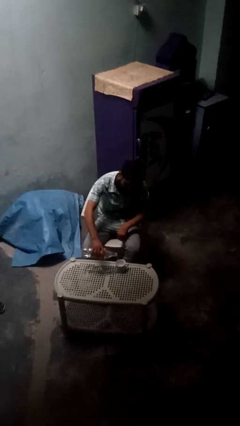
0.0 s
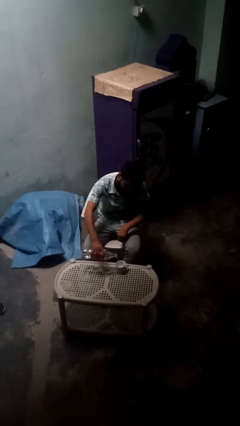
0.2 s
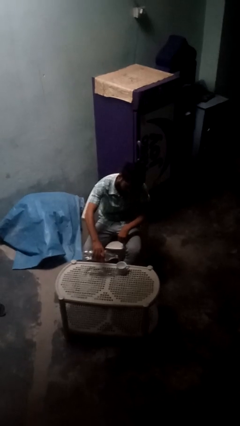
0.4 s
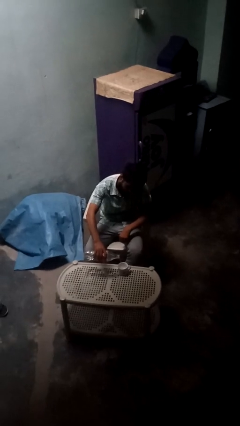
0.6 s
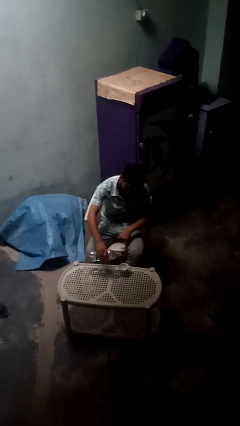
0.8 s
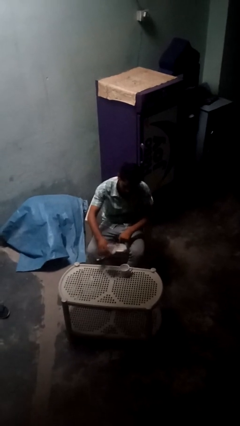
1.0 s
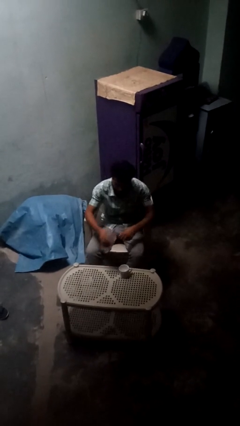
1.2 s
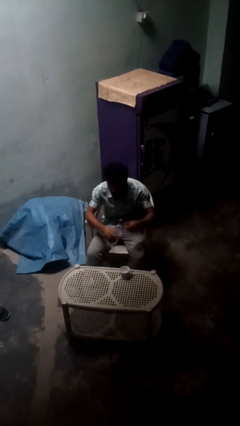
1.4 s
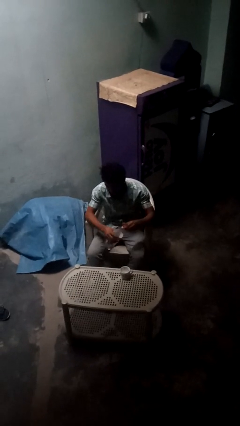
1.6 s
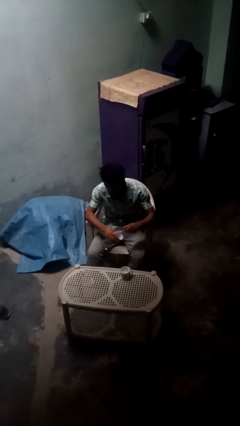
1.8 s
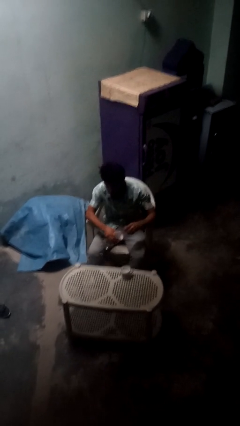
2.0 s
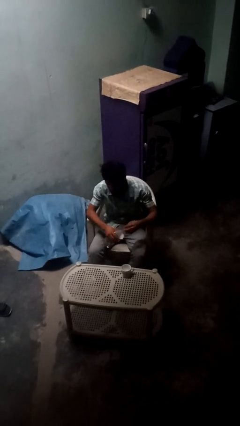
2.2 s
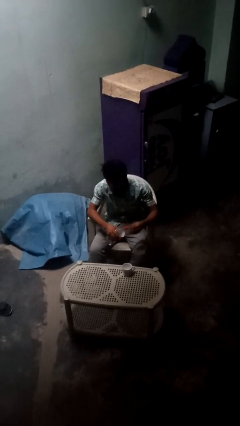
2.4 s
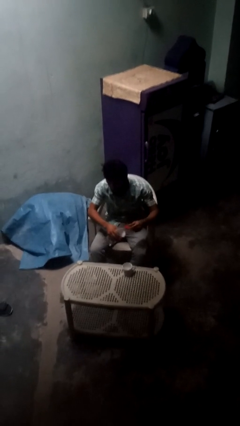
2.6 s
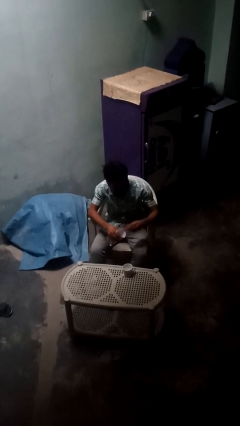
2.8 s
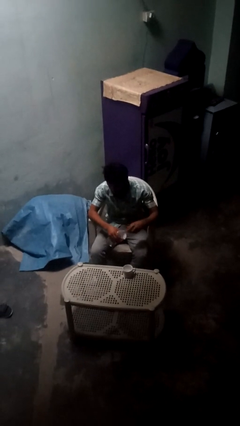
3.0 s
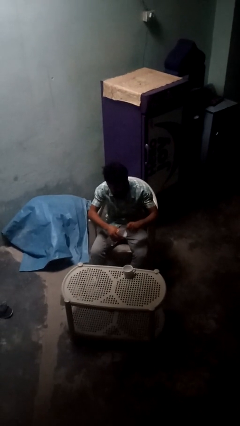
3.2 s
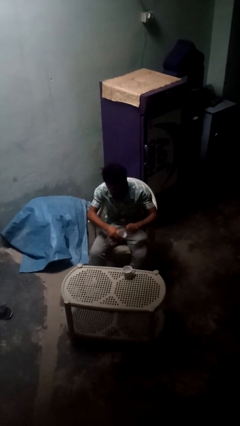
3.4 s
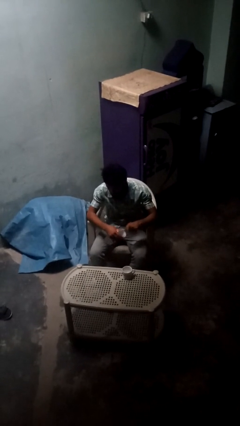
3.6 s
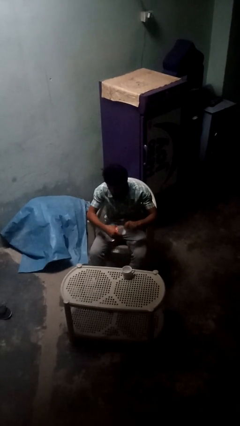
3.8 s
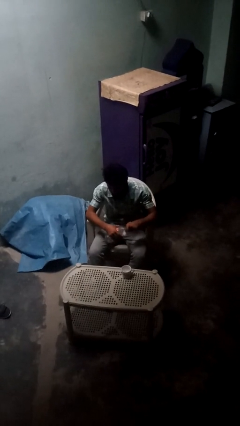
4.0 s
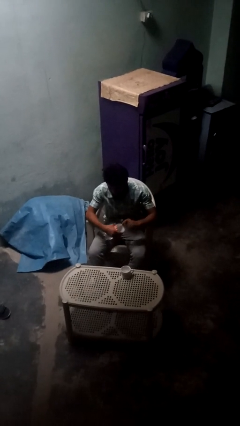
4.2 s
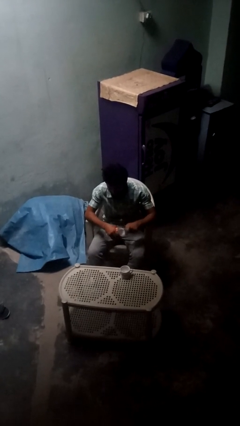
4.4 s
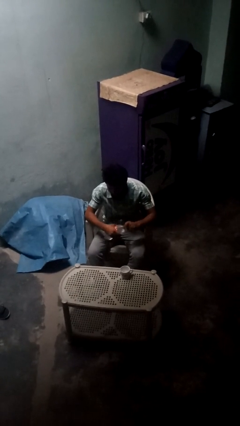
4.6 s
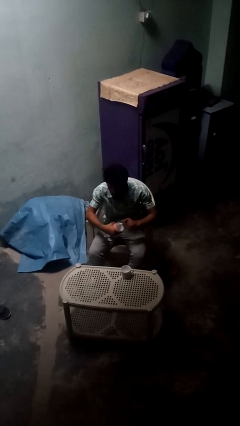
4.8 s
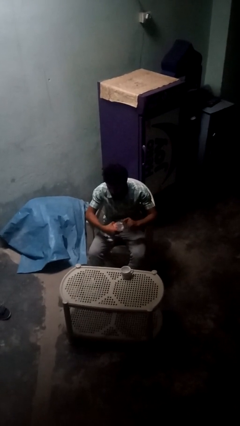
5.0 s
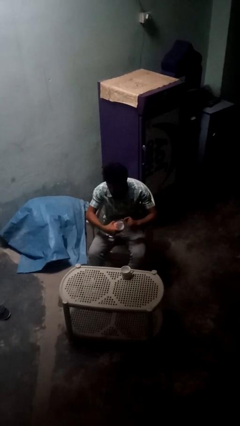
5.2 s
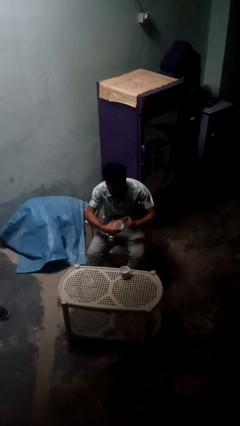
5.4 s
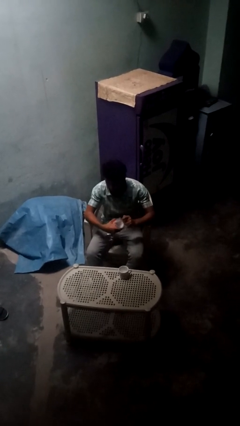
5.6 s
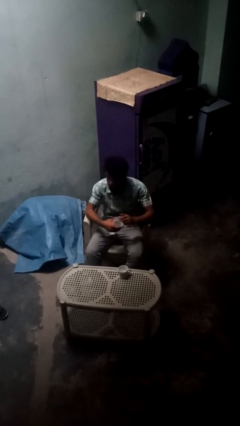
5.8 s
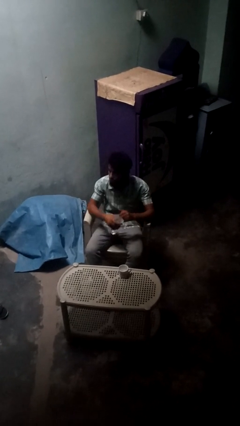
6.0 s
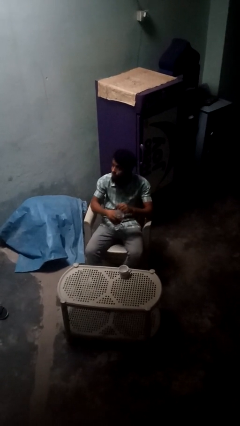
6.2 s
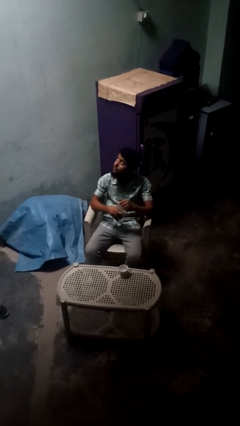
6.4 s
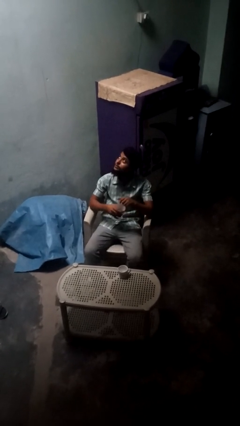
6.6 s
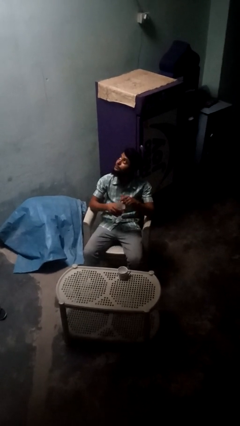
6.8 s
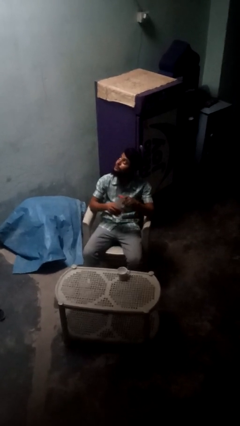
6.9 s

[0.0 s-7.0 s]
person screws lid to bottle

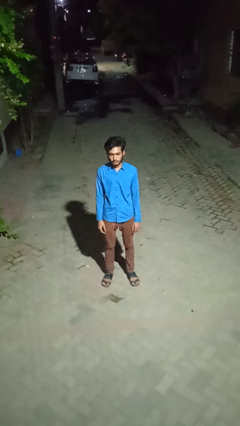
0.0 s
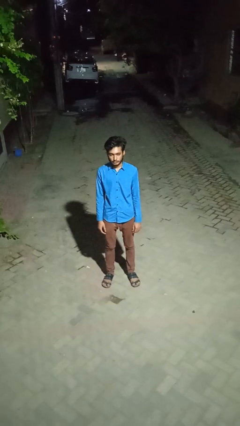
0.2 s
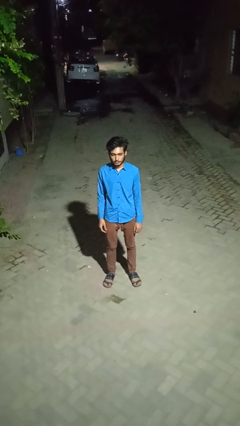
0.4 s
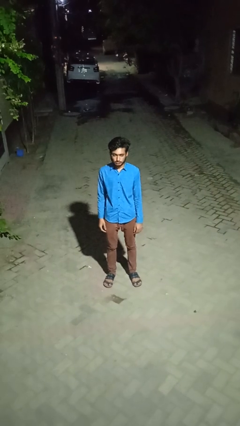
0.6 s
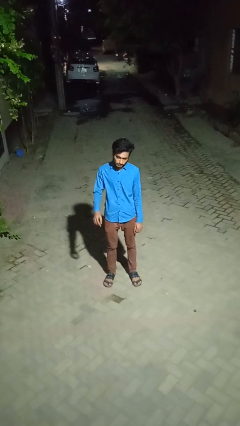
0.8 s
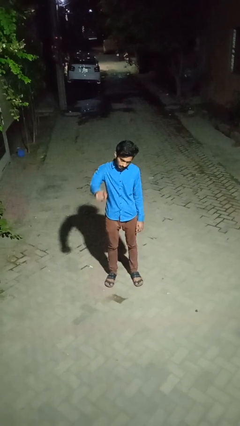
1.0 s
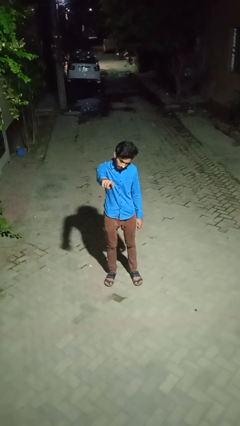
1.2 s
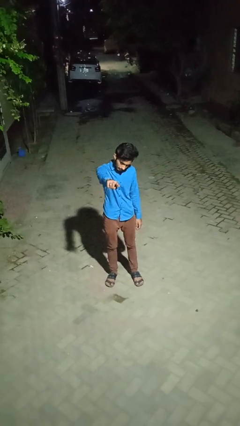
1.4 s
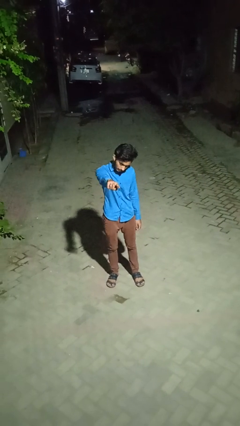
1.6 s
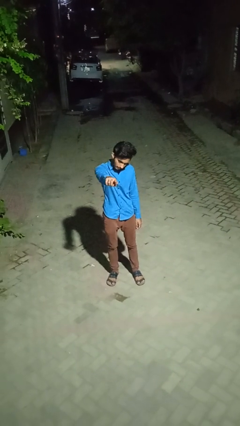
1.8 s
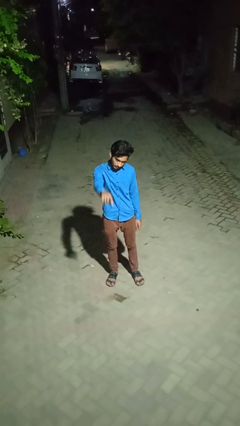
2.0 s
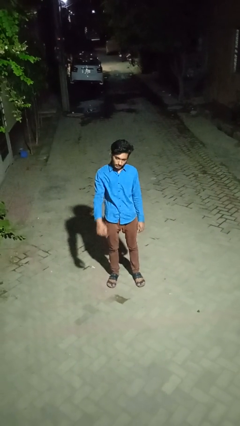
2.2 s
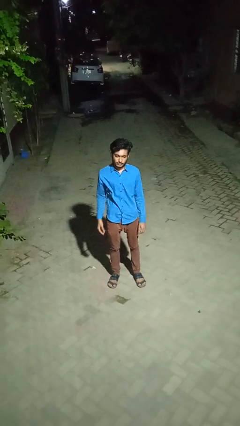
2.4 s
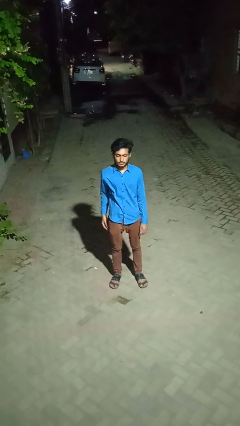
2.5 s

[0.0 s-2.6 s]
person points at person

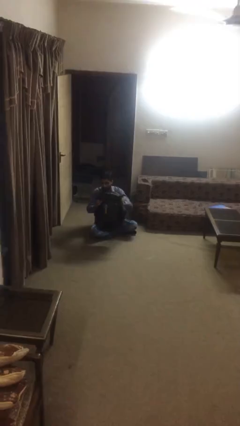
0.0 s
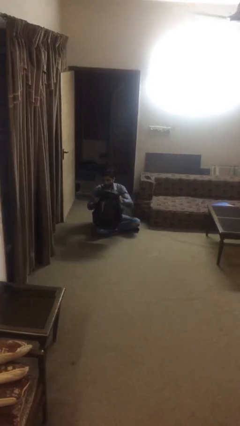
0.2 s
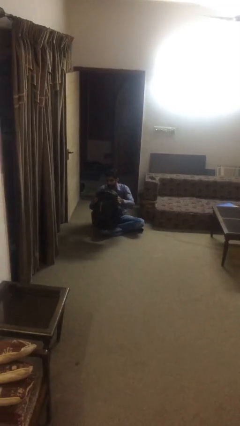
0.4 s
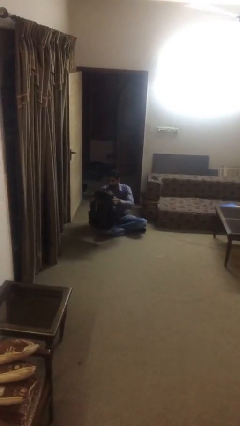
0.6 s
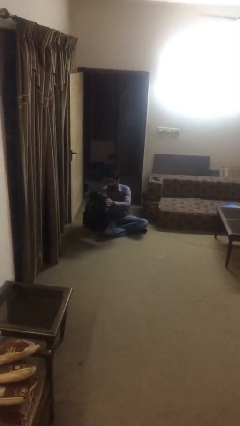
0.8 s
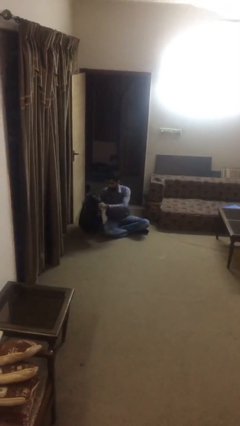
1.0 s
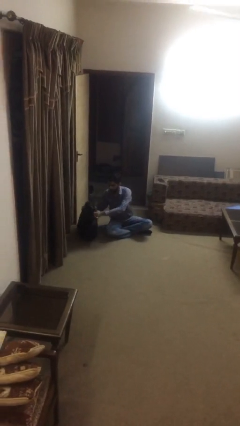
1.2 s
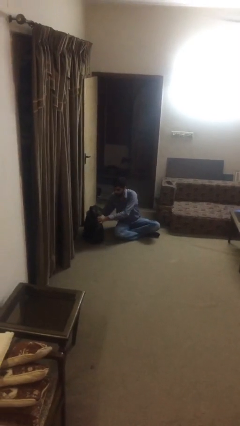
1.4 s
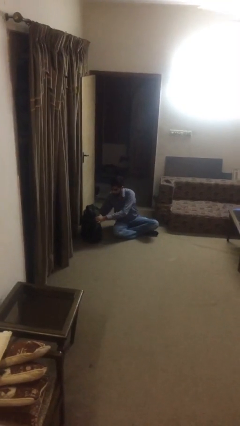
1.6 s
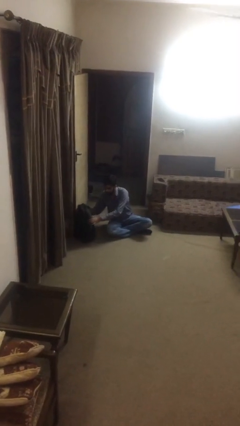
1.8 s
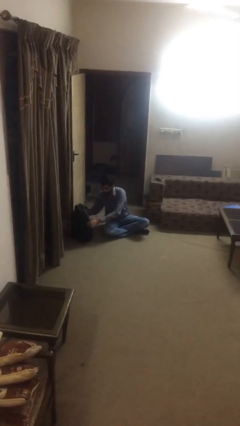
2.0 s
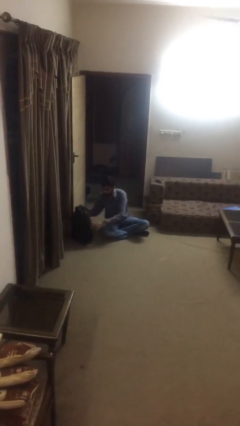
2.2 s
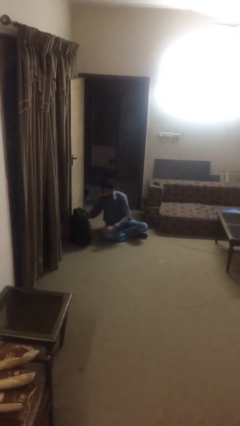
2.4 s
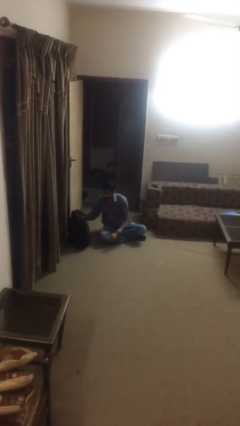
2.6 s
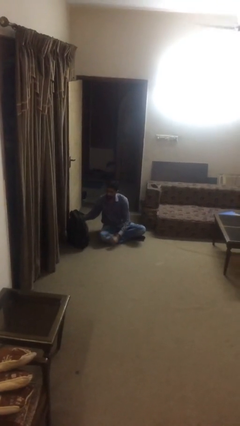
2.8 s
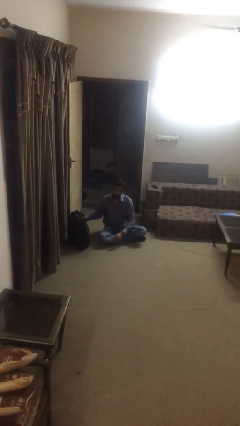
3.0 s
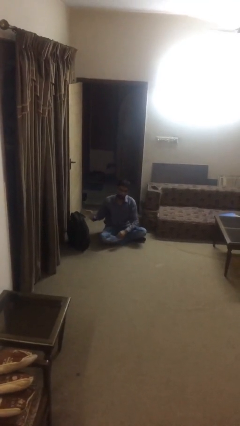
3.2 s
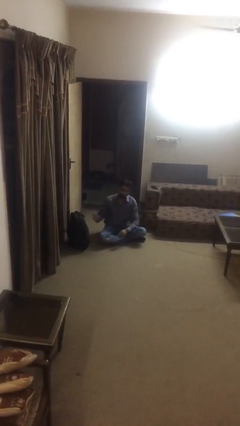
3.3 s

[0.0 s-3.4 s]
person puts down object on floor

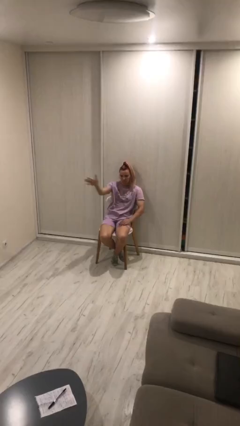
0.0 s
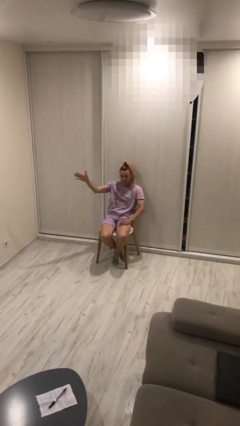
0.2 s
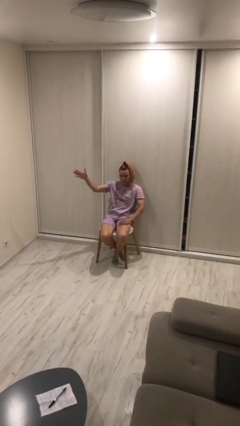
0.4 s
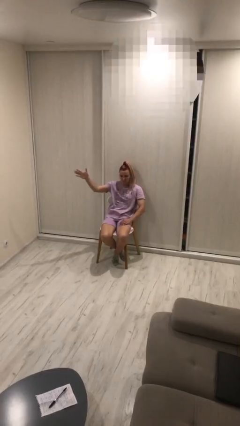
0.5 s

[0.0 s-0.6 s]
person gestures swipe right

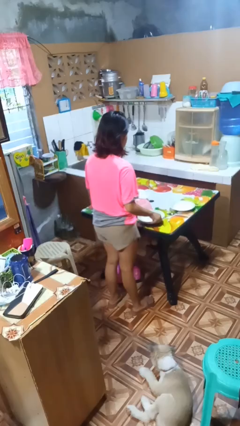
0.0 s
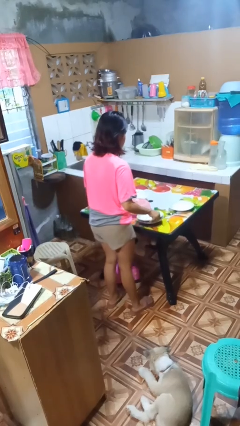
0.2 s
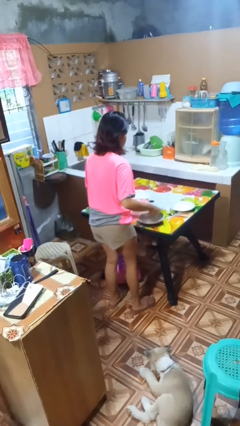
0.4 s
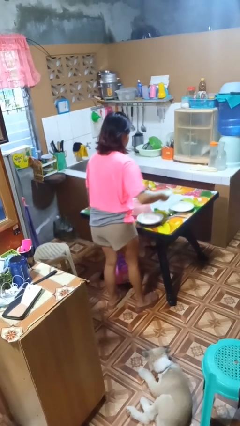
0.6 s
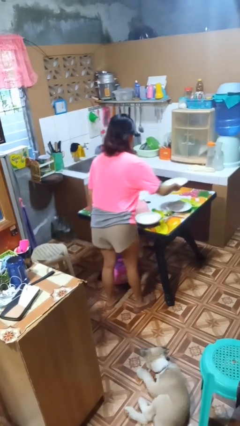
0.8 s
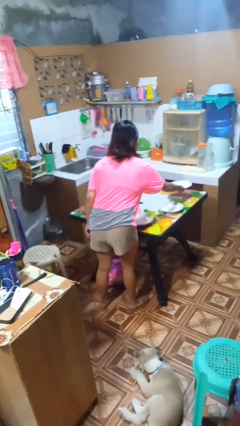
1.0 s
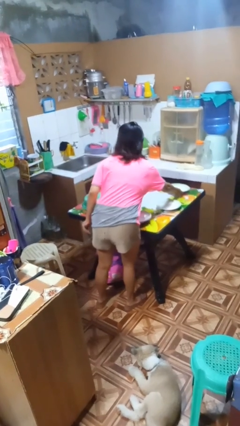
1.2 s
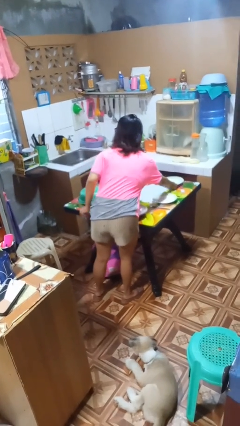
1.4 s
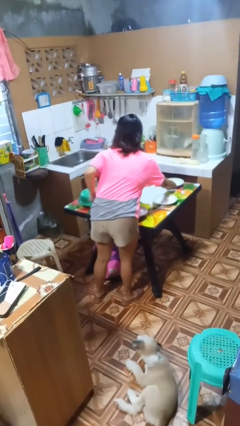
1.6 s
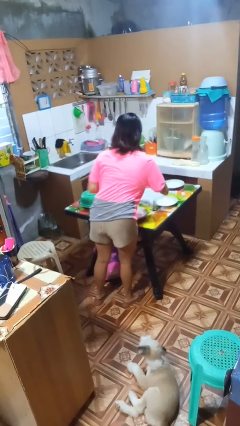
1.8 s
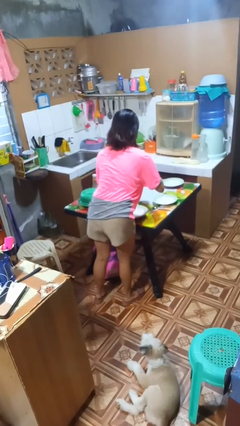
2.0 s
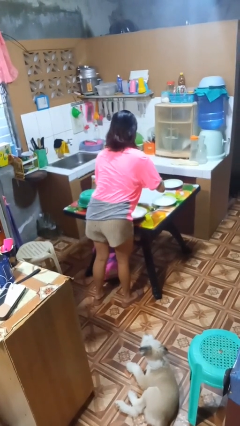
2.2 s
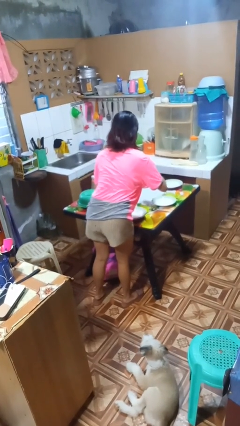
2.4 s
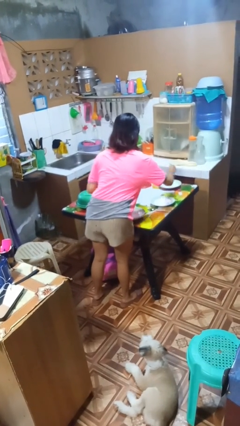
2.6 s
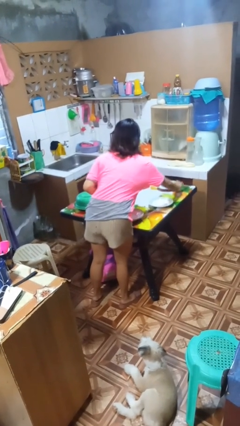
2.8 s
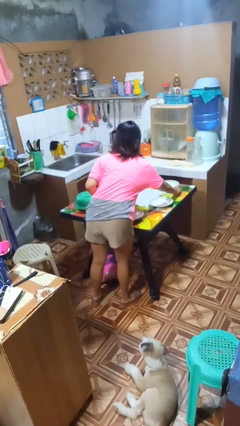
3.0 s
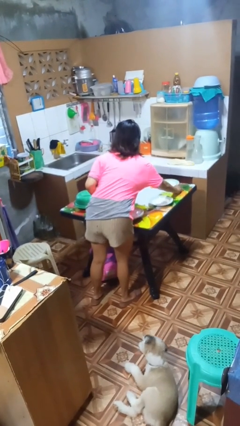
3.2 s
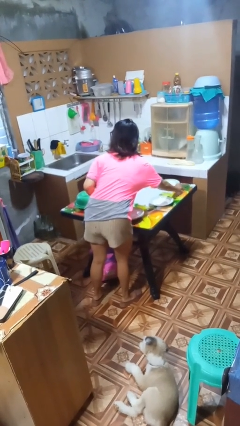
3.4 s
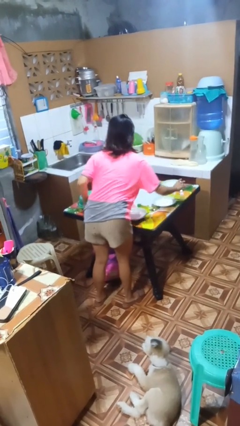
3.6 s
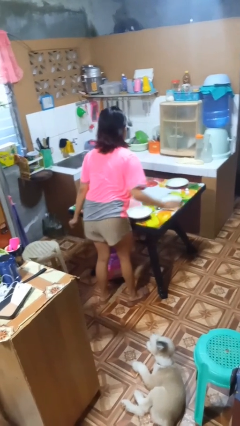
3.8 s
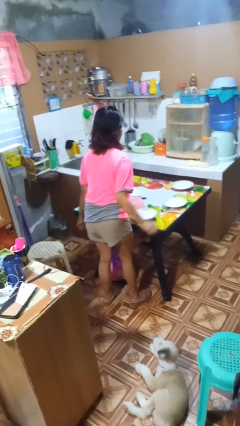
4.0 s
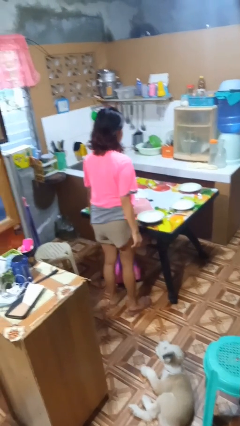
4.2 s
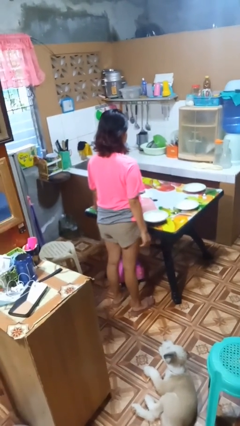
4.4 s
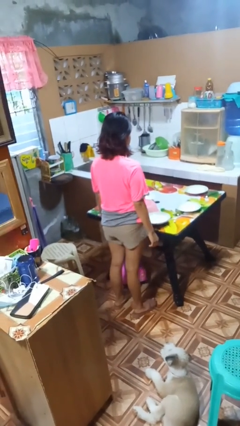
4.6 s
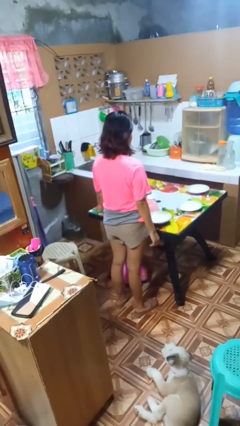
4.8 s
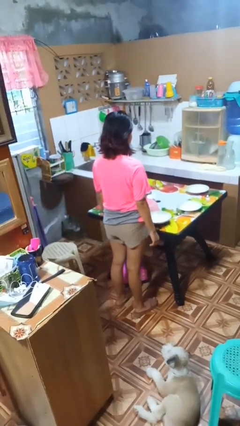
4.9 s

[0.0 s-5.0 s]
person sets table
